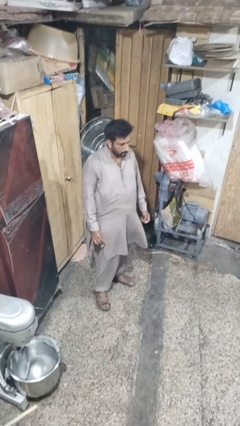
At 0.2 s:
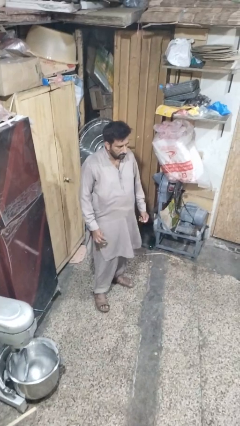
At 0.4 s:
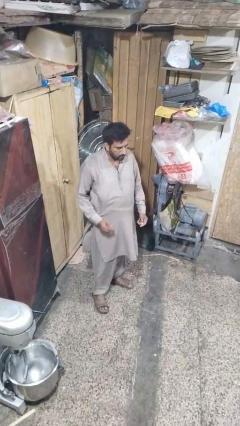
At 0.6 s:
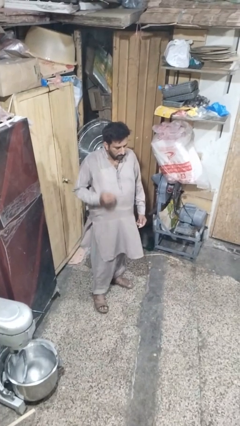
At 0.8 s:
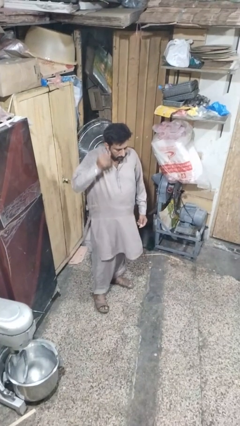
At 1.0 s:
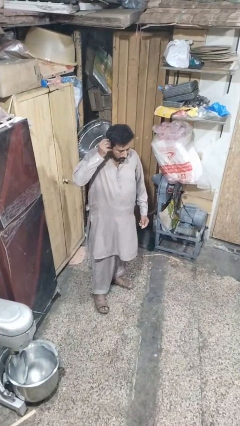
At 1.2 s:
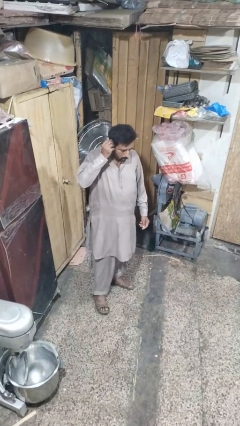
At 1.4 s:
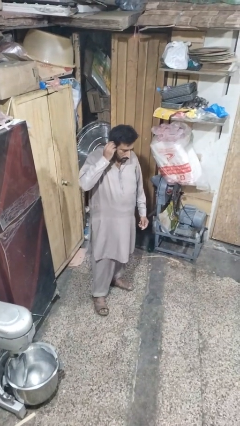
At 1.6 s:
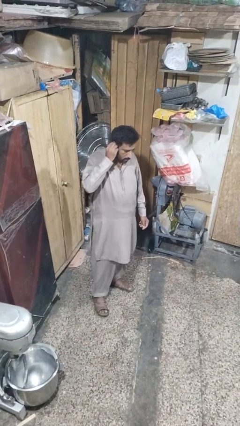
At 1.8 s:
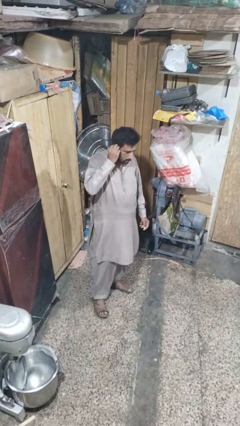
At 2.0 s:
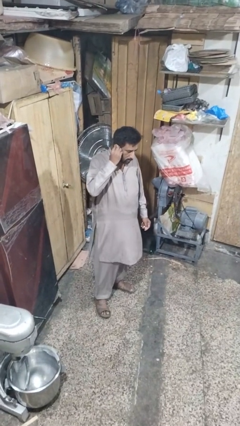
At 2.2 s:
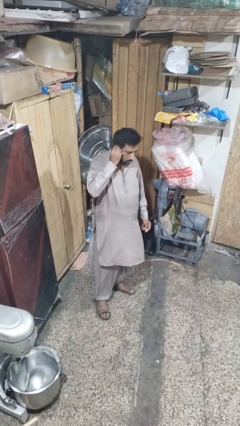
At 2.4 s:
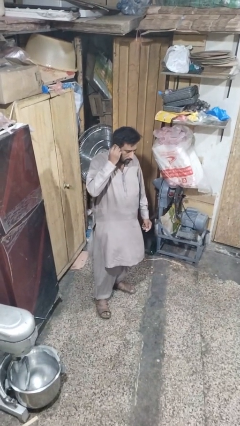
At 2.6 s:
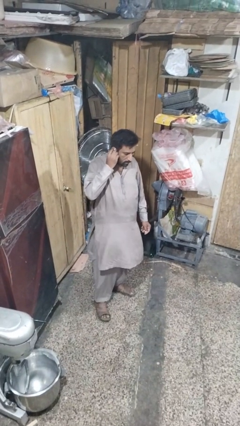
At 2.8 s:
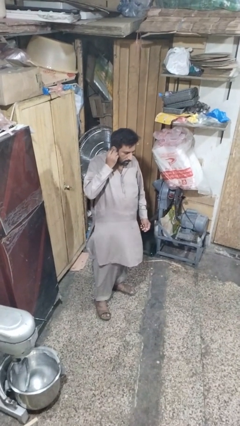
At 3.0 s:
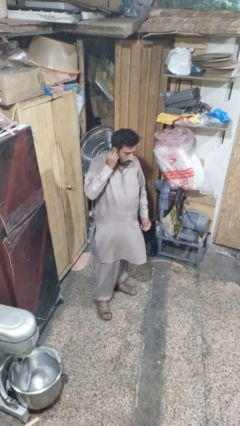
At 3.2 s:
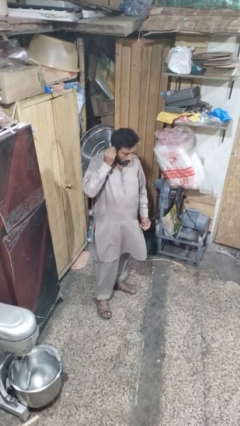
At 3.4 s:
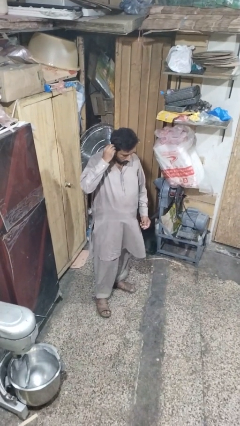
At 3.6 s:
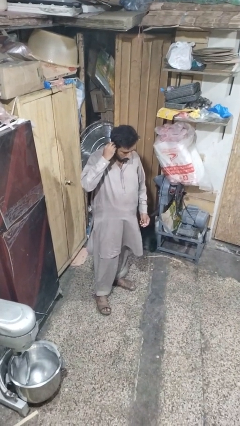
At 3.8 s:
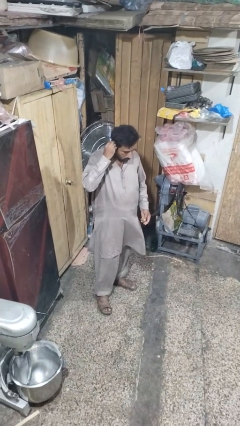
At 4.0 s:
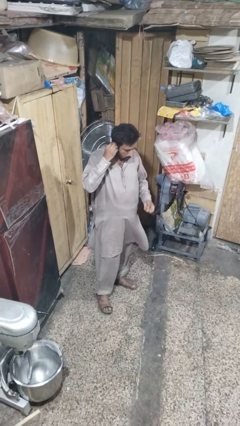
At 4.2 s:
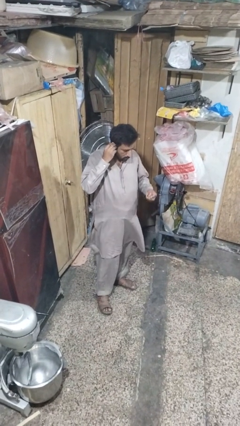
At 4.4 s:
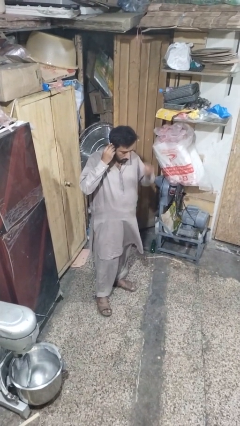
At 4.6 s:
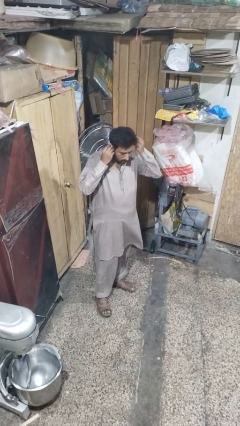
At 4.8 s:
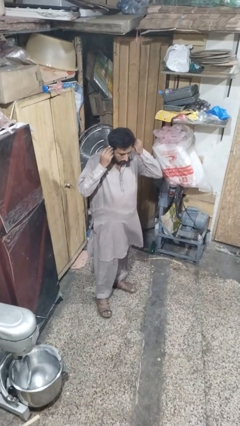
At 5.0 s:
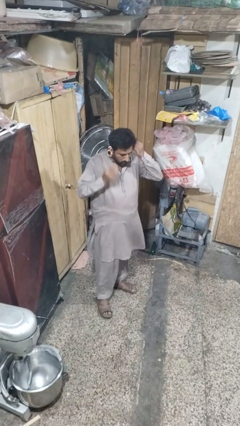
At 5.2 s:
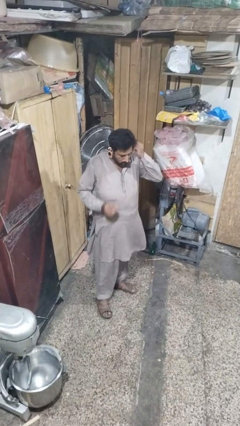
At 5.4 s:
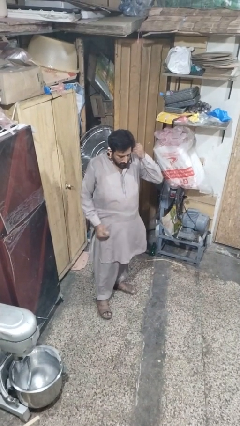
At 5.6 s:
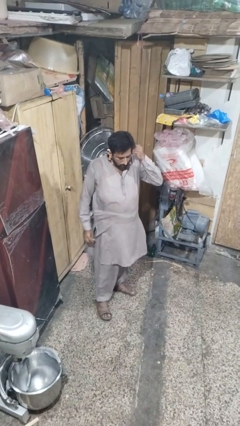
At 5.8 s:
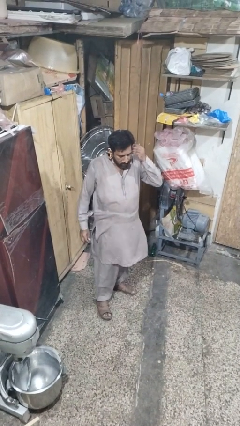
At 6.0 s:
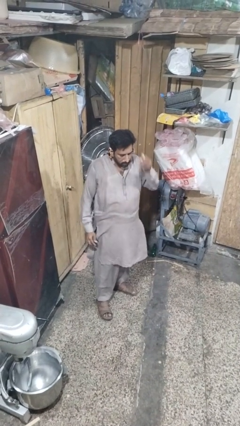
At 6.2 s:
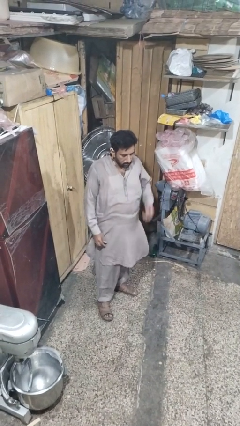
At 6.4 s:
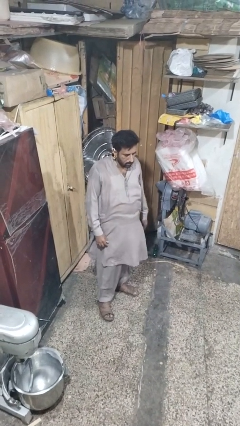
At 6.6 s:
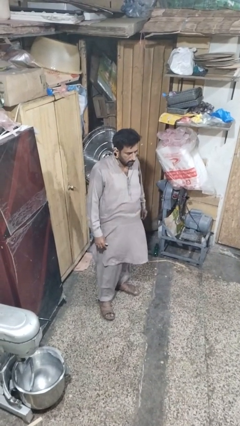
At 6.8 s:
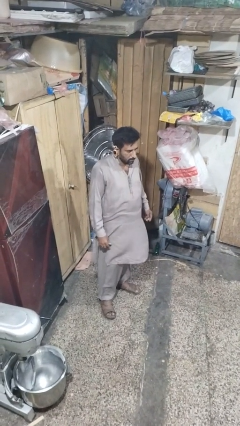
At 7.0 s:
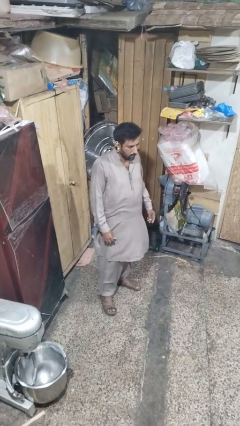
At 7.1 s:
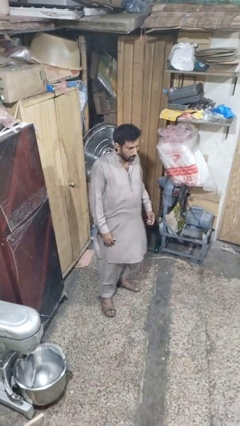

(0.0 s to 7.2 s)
person puts on earrings

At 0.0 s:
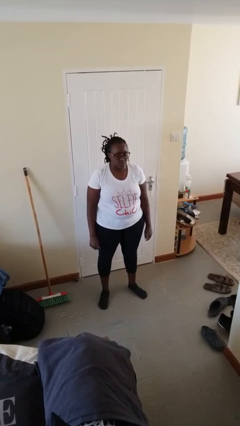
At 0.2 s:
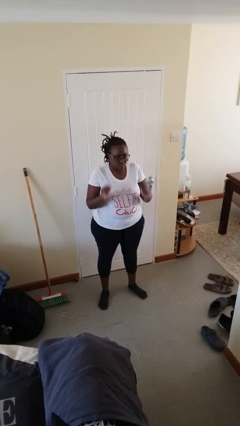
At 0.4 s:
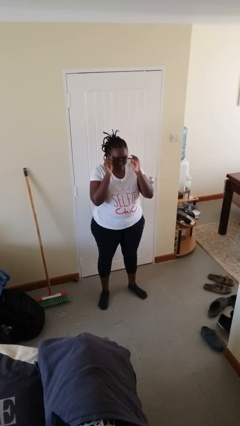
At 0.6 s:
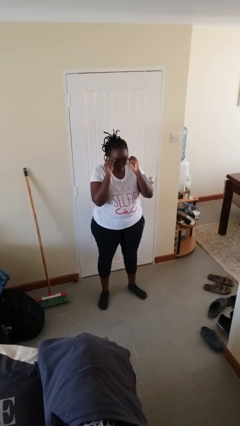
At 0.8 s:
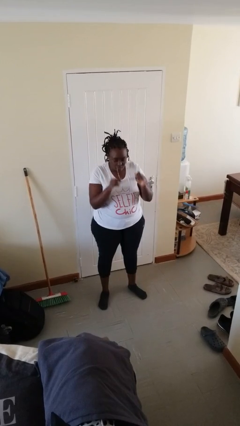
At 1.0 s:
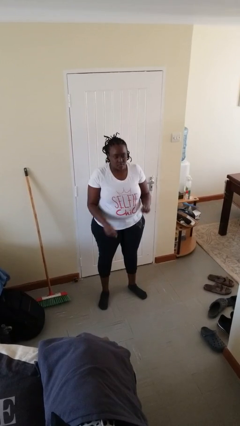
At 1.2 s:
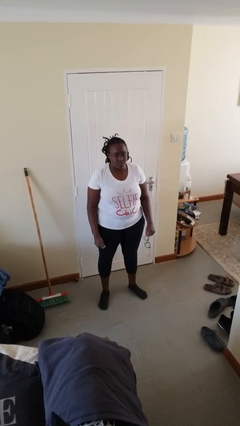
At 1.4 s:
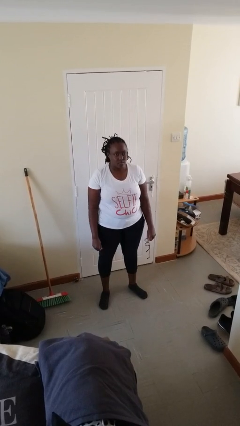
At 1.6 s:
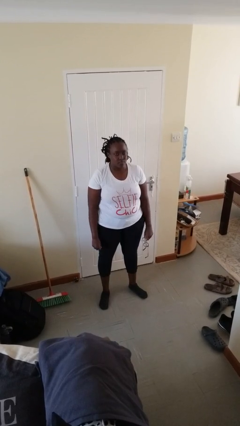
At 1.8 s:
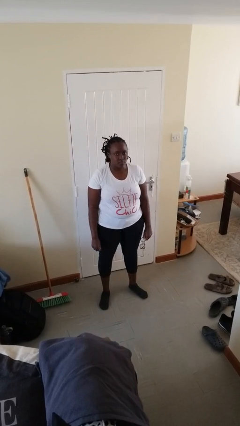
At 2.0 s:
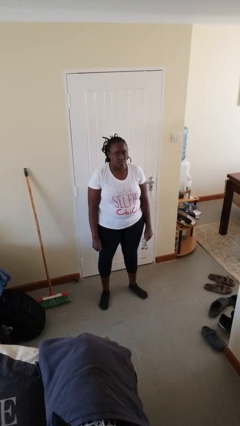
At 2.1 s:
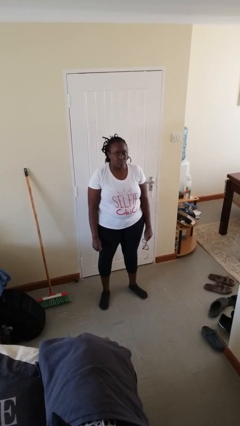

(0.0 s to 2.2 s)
person takes off glasses

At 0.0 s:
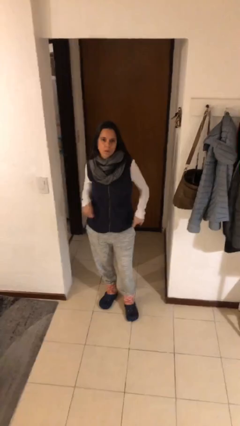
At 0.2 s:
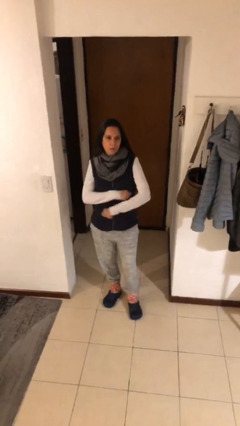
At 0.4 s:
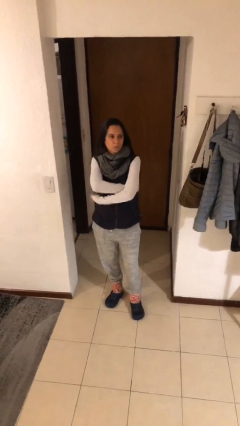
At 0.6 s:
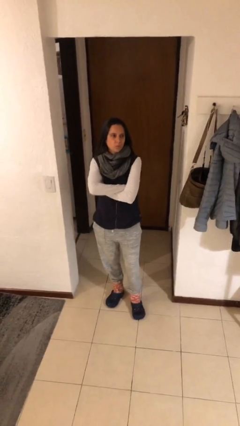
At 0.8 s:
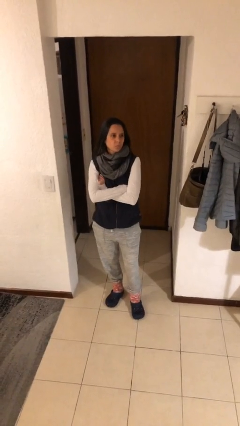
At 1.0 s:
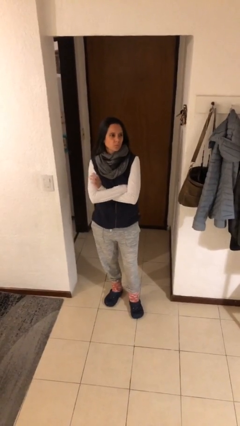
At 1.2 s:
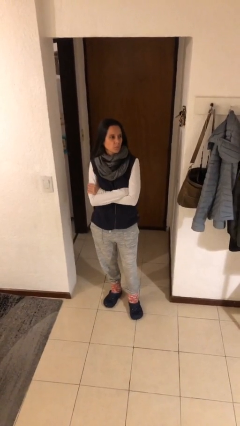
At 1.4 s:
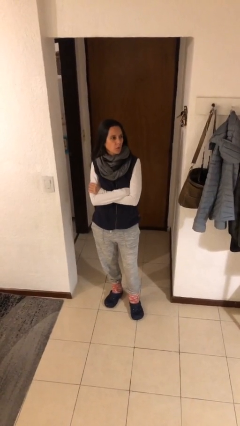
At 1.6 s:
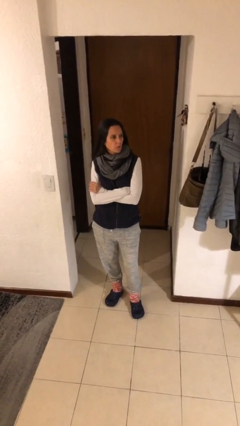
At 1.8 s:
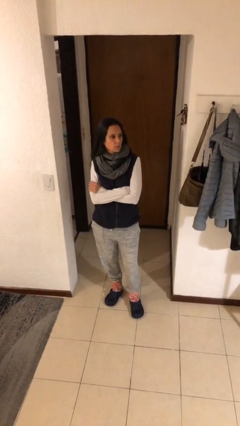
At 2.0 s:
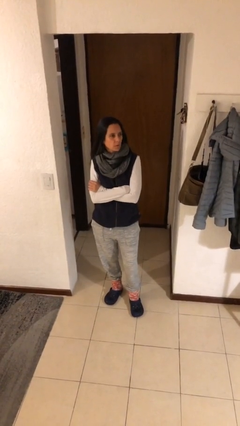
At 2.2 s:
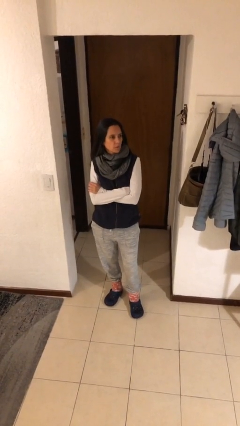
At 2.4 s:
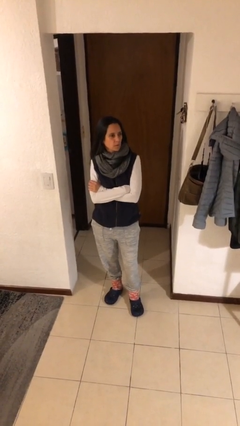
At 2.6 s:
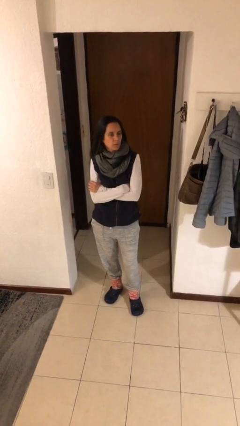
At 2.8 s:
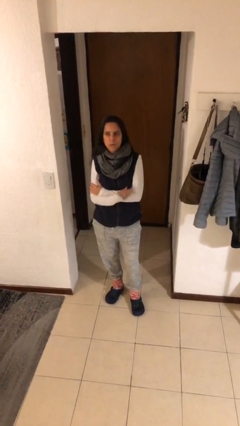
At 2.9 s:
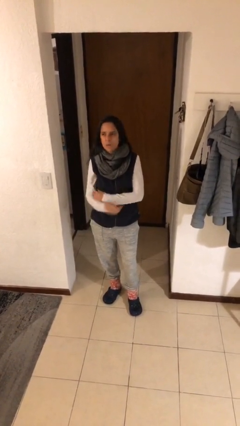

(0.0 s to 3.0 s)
person crosses arms

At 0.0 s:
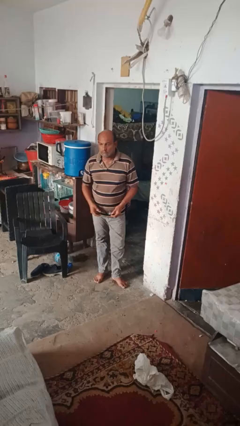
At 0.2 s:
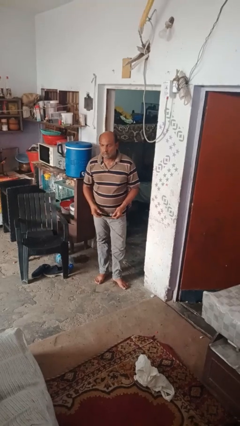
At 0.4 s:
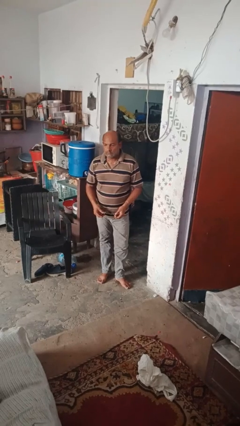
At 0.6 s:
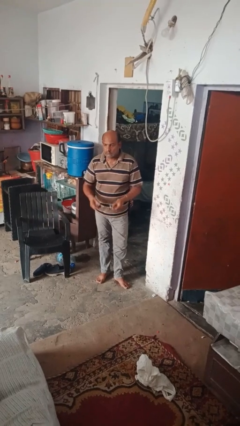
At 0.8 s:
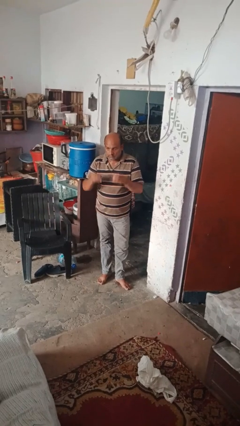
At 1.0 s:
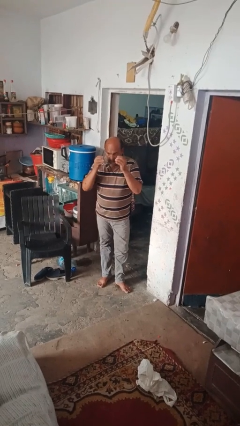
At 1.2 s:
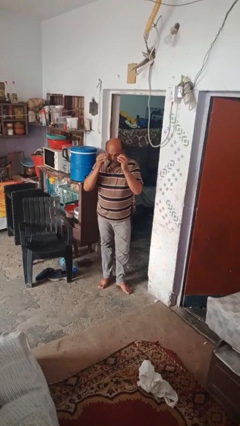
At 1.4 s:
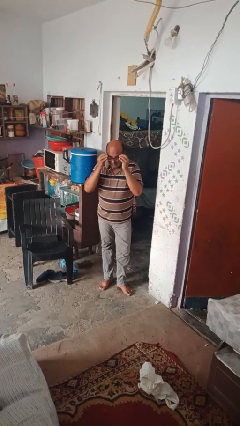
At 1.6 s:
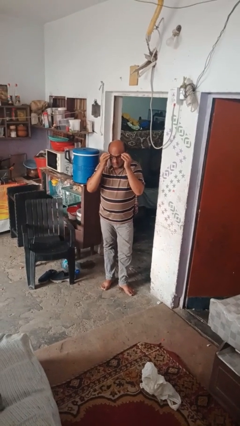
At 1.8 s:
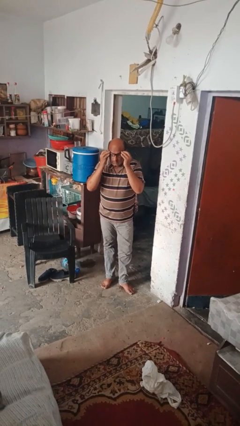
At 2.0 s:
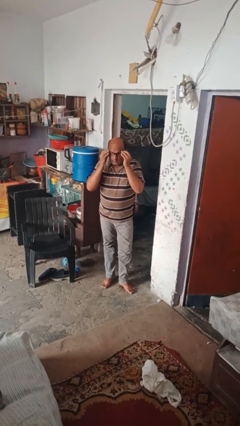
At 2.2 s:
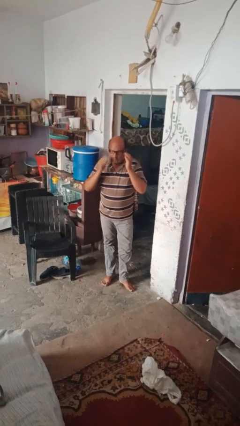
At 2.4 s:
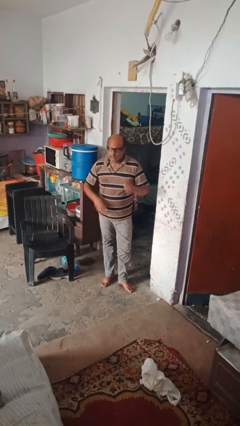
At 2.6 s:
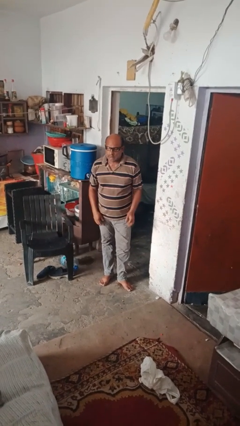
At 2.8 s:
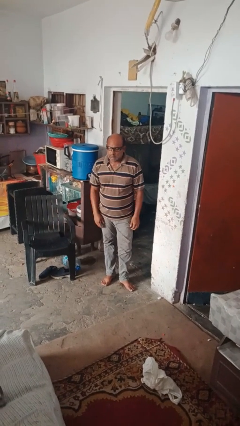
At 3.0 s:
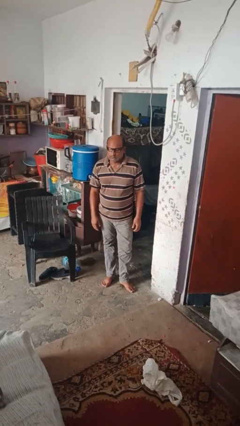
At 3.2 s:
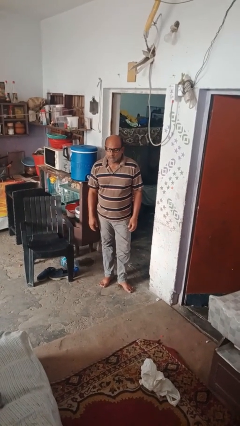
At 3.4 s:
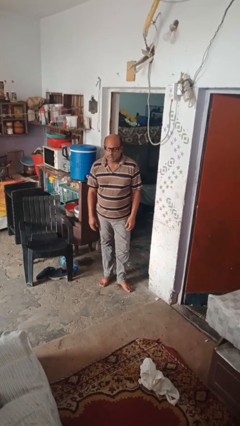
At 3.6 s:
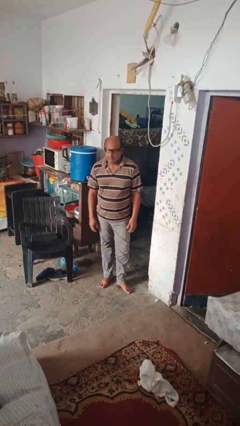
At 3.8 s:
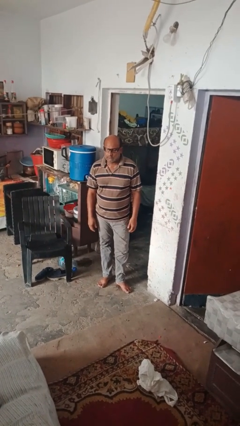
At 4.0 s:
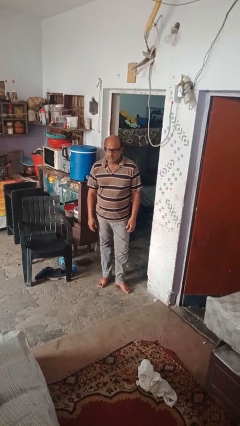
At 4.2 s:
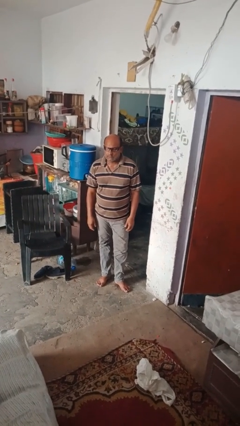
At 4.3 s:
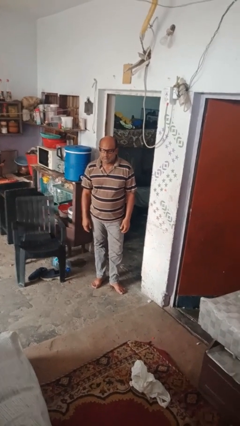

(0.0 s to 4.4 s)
person puts on glasses

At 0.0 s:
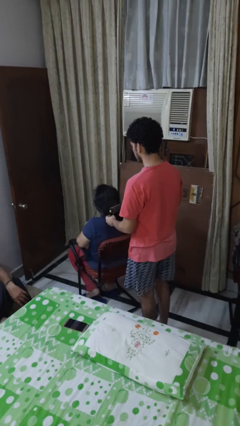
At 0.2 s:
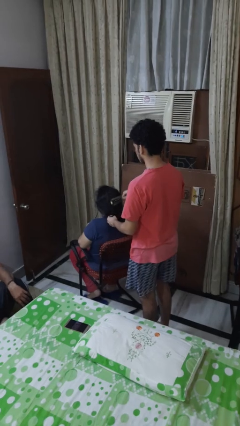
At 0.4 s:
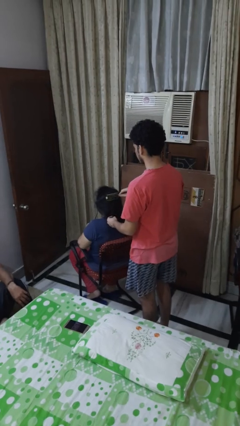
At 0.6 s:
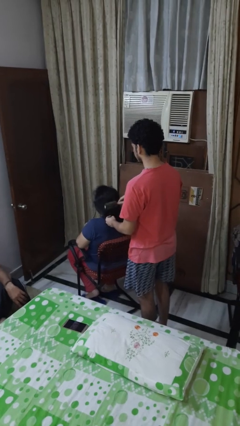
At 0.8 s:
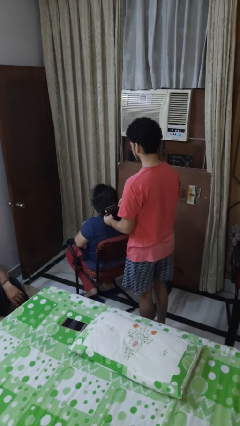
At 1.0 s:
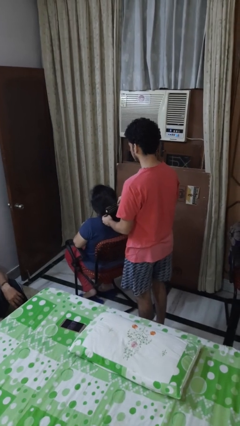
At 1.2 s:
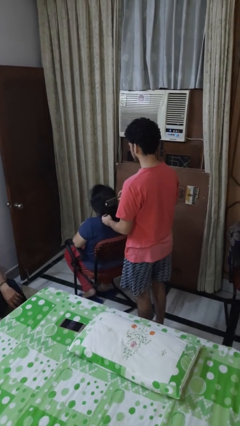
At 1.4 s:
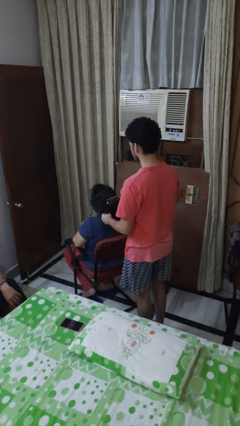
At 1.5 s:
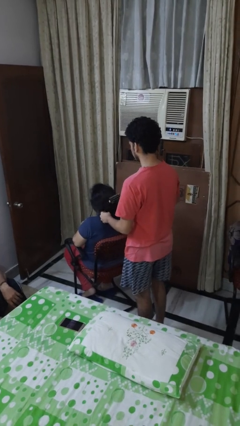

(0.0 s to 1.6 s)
person brushes hair of person
